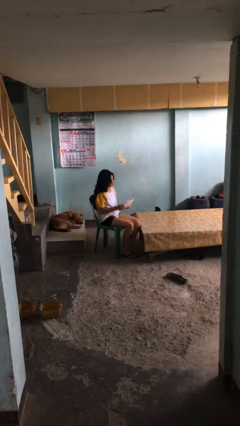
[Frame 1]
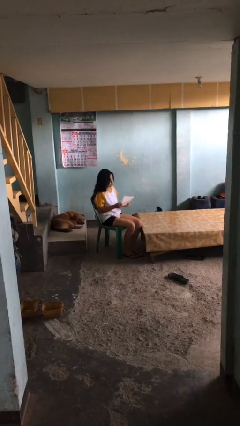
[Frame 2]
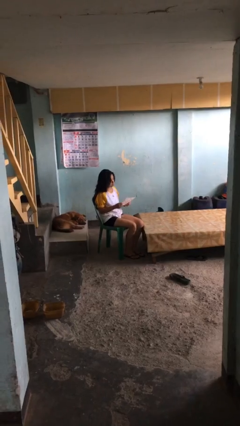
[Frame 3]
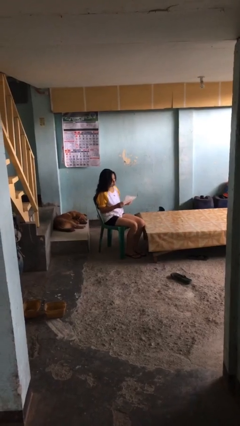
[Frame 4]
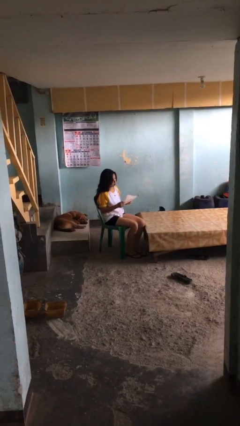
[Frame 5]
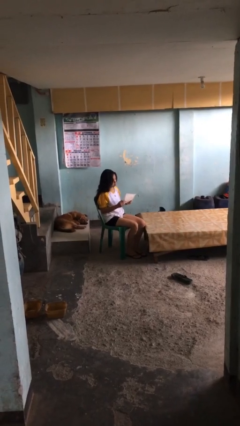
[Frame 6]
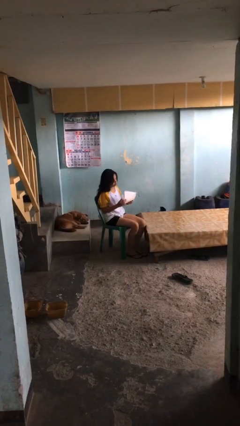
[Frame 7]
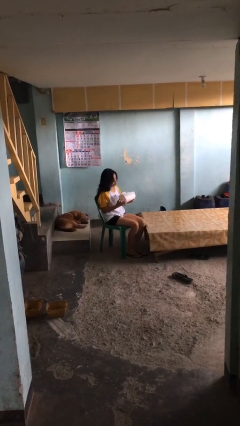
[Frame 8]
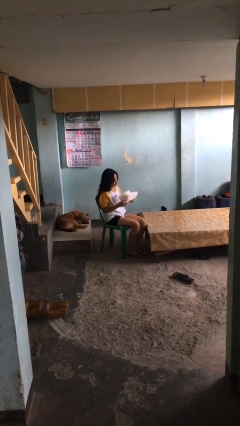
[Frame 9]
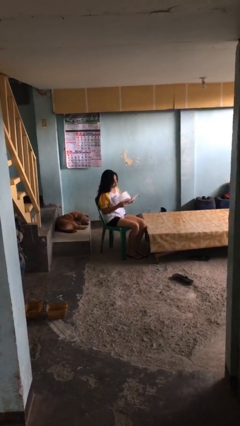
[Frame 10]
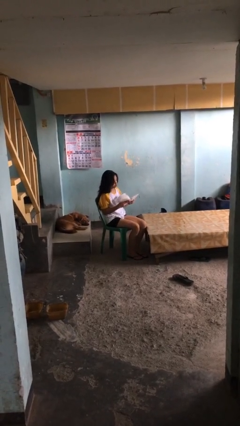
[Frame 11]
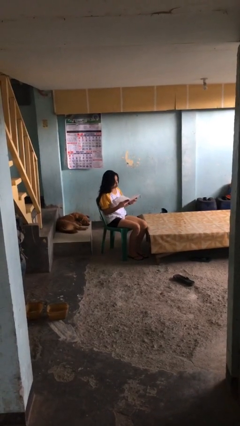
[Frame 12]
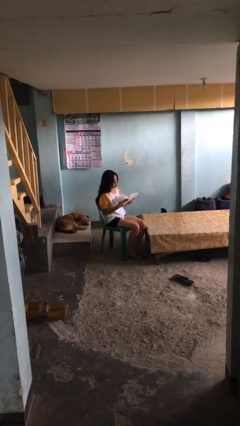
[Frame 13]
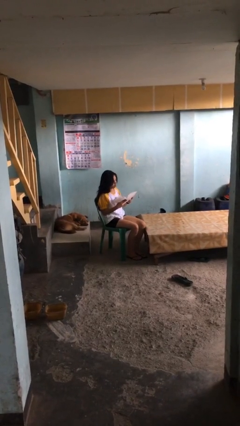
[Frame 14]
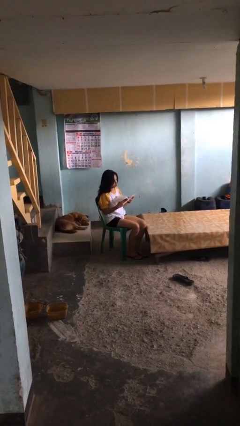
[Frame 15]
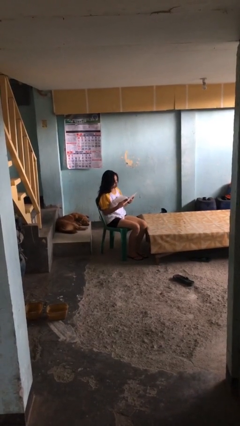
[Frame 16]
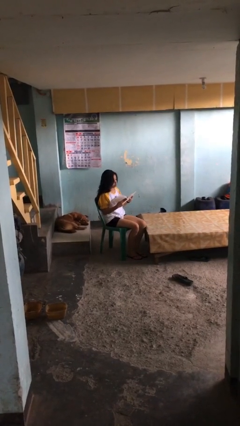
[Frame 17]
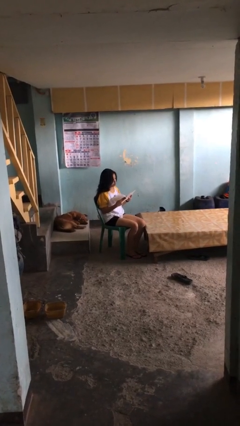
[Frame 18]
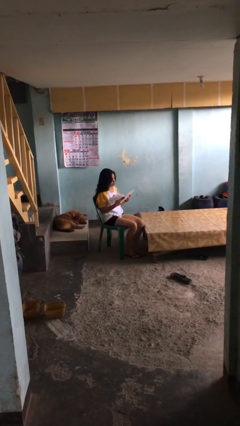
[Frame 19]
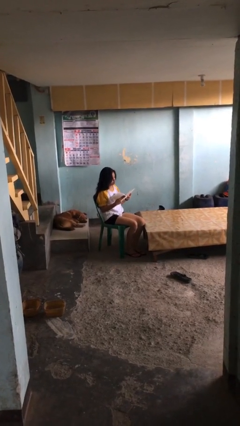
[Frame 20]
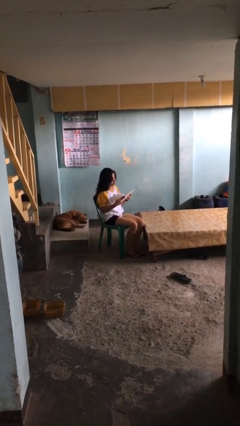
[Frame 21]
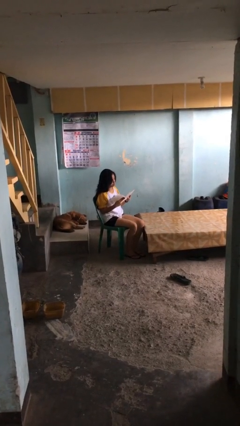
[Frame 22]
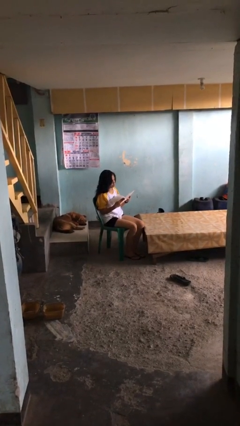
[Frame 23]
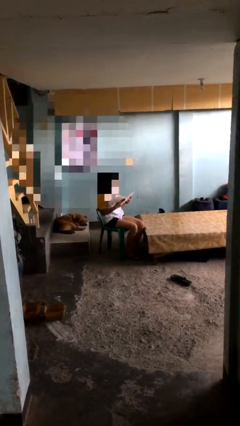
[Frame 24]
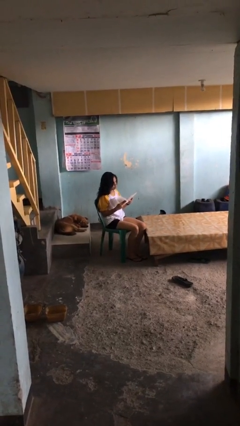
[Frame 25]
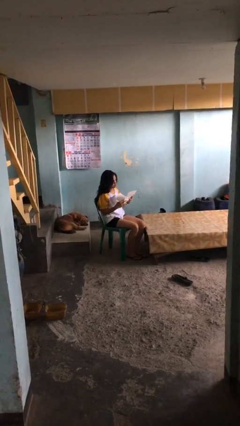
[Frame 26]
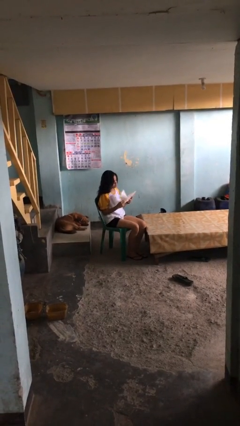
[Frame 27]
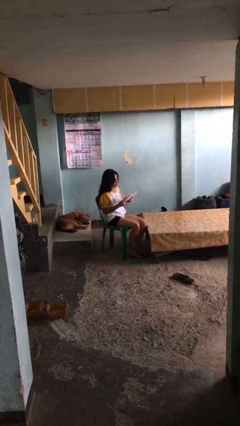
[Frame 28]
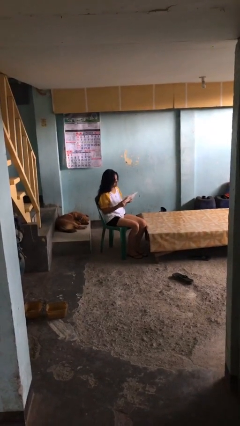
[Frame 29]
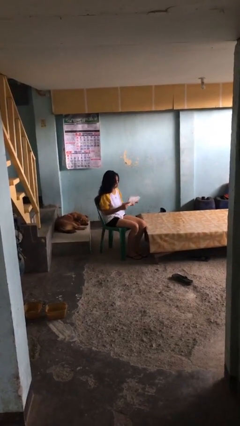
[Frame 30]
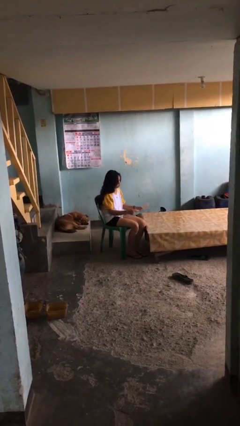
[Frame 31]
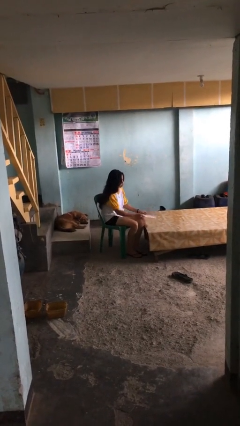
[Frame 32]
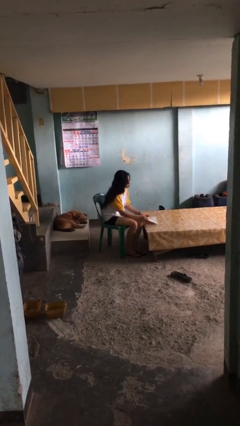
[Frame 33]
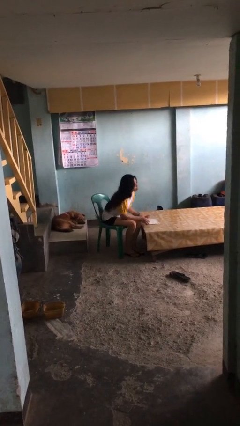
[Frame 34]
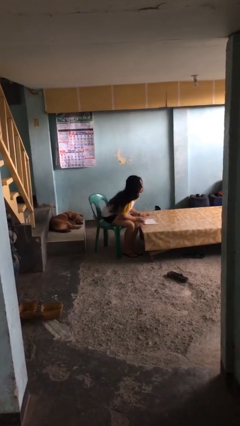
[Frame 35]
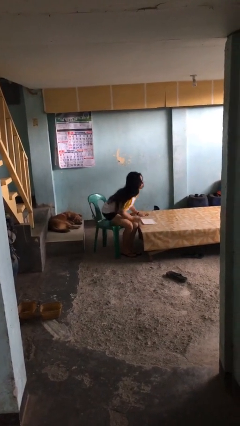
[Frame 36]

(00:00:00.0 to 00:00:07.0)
person reads document

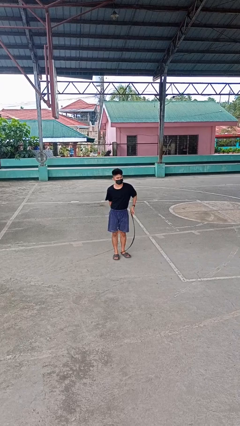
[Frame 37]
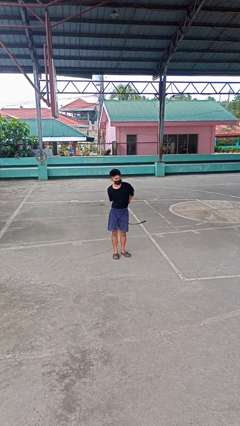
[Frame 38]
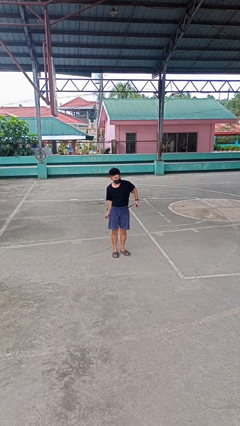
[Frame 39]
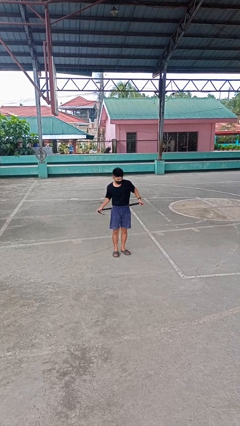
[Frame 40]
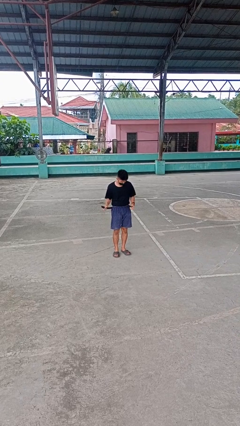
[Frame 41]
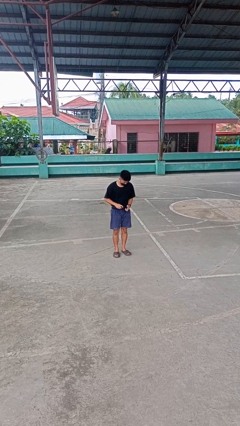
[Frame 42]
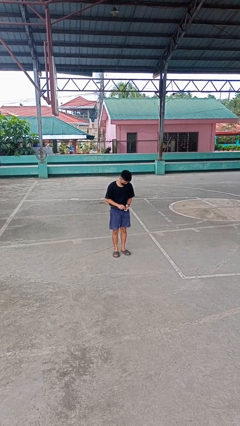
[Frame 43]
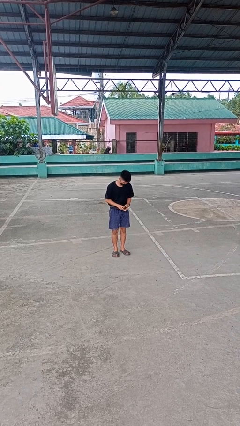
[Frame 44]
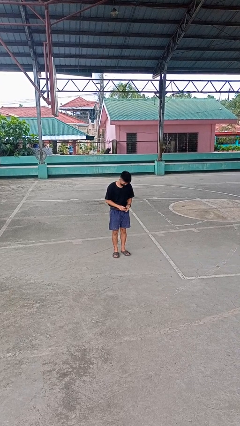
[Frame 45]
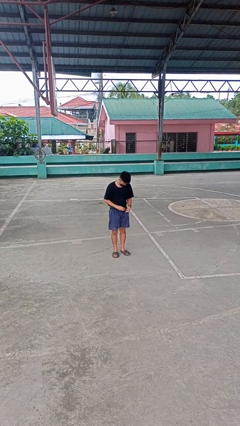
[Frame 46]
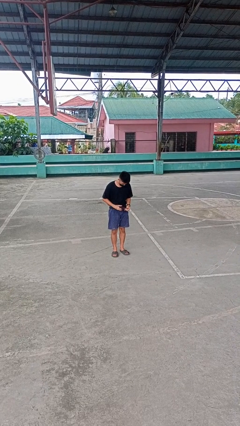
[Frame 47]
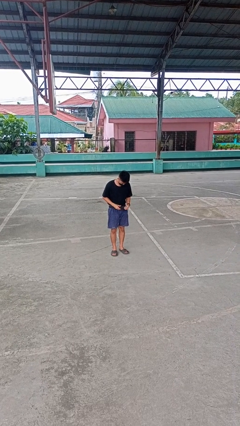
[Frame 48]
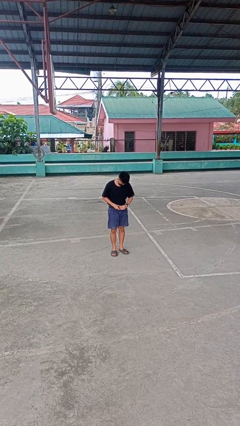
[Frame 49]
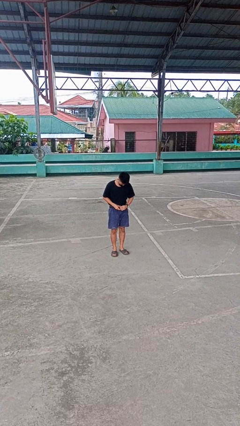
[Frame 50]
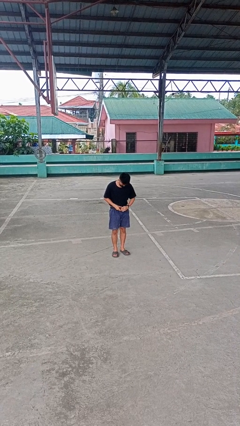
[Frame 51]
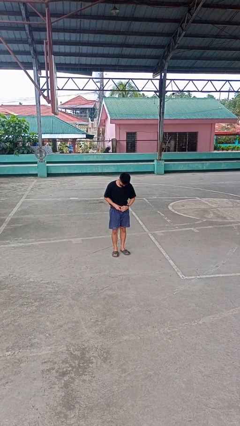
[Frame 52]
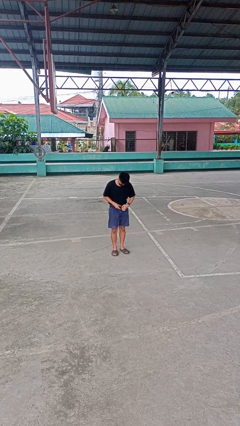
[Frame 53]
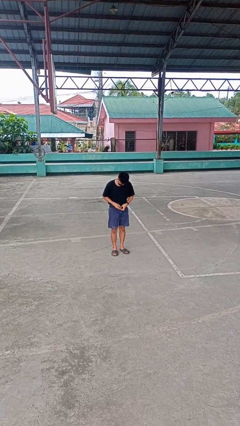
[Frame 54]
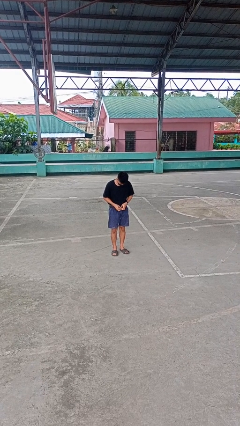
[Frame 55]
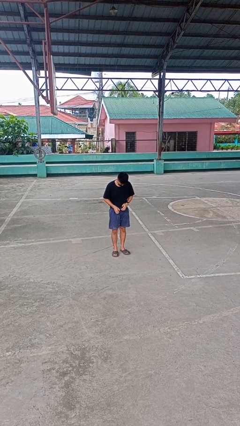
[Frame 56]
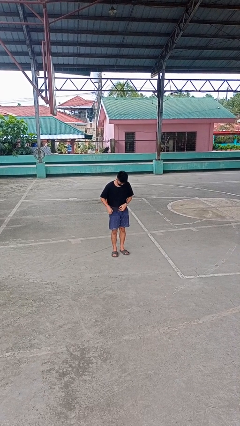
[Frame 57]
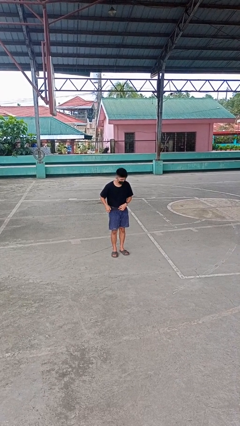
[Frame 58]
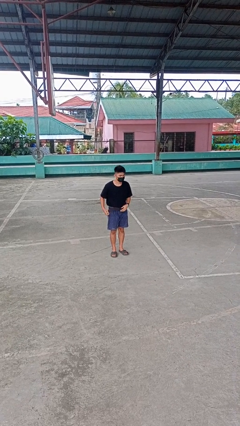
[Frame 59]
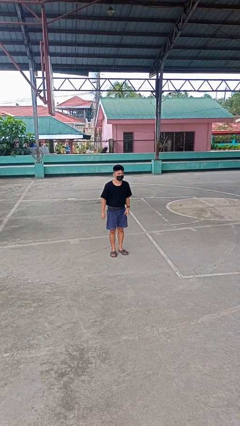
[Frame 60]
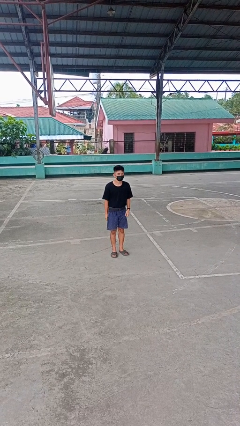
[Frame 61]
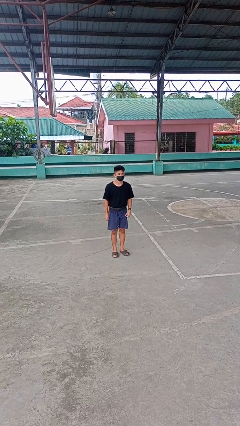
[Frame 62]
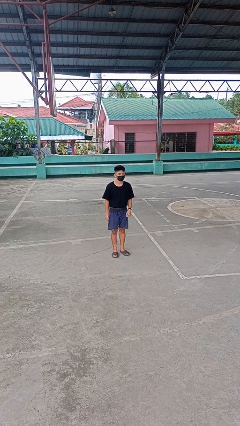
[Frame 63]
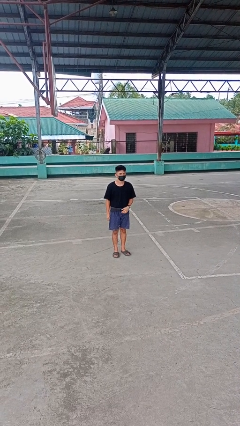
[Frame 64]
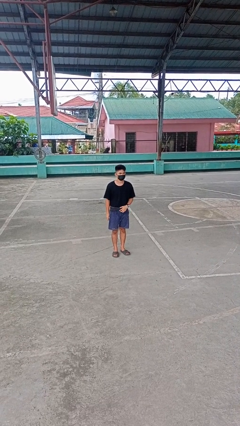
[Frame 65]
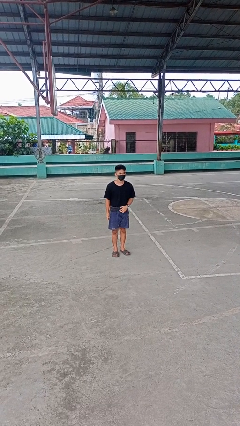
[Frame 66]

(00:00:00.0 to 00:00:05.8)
person puts on belt

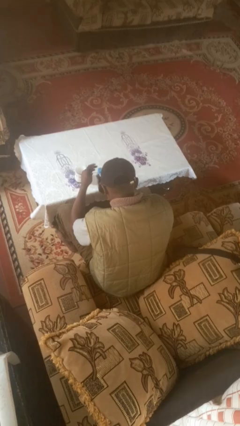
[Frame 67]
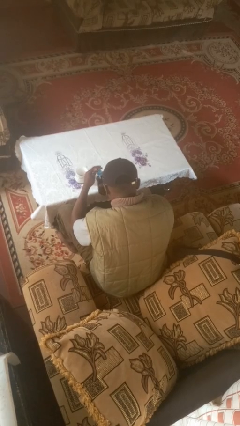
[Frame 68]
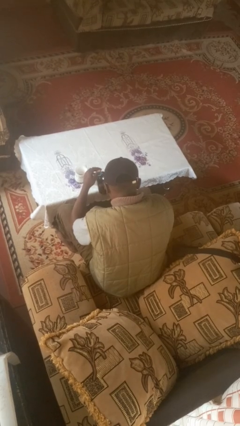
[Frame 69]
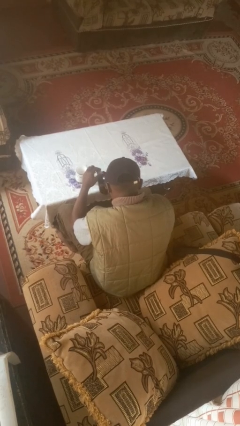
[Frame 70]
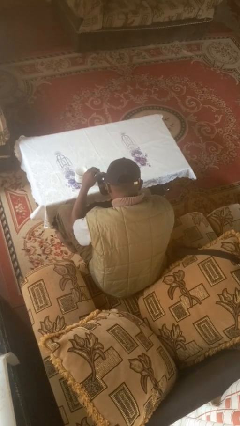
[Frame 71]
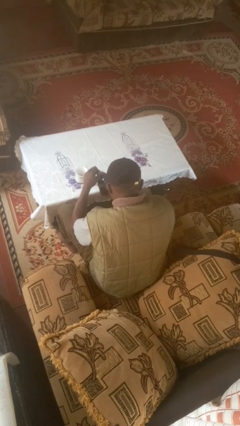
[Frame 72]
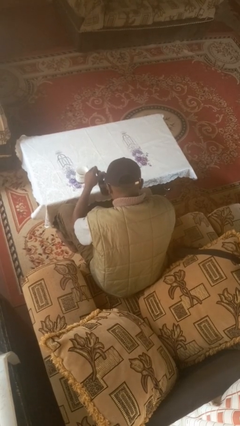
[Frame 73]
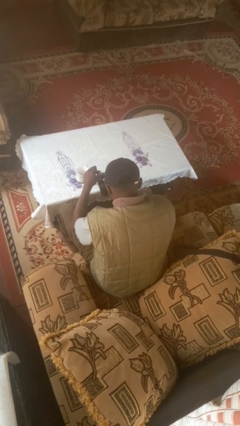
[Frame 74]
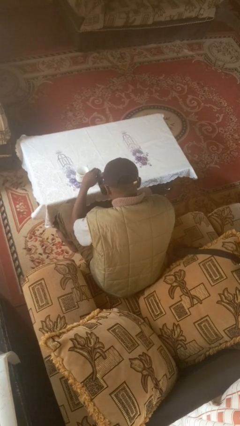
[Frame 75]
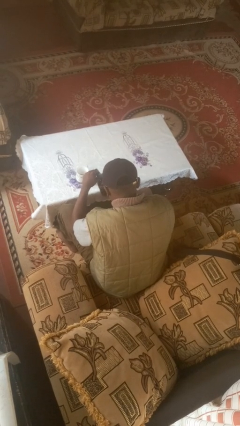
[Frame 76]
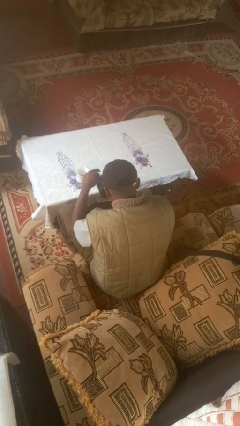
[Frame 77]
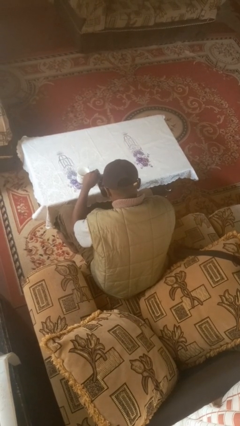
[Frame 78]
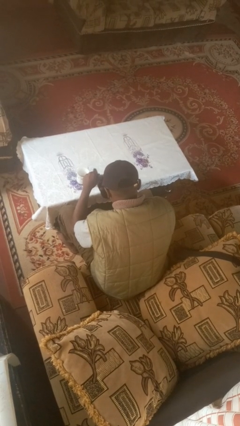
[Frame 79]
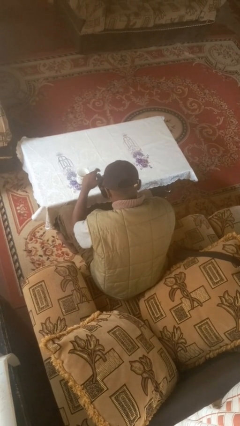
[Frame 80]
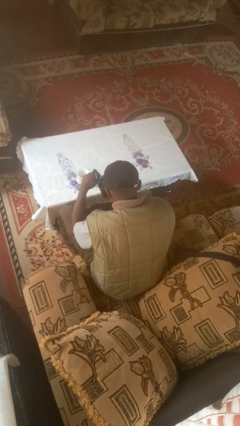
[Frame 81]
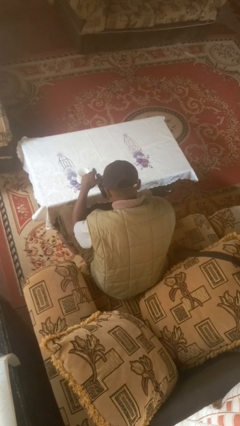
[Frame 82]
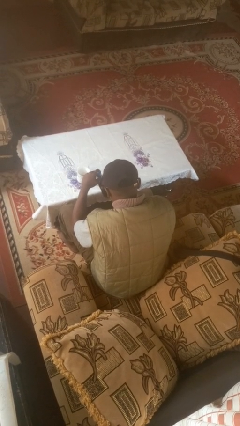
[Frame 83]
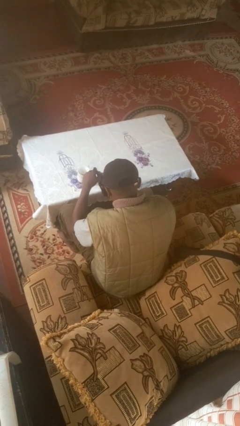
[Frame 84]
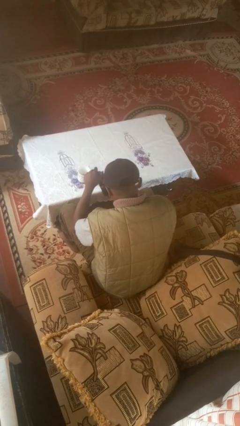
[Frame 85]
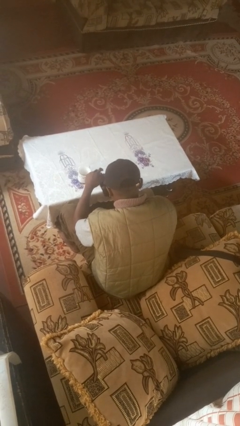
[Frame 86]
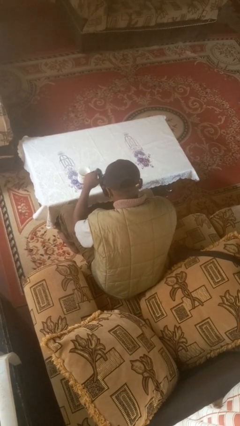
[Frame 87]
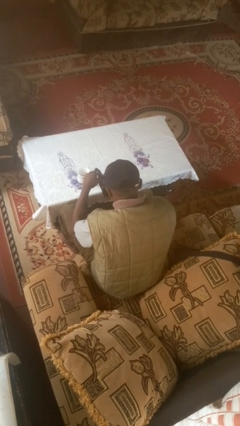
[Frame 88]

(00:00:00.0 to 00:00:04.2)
person unscrews lid from bottle

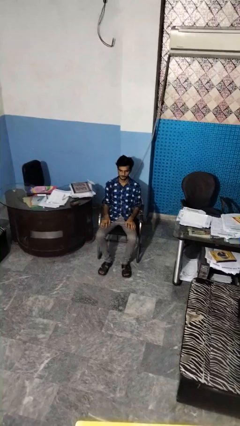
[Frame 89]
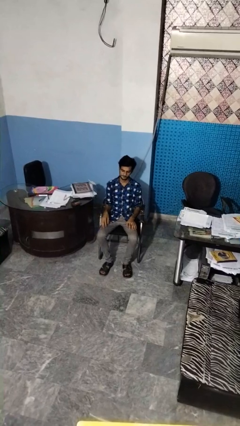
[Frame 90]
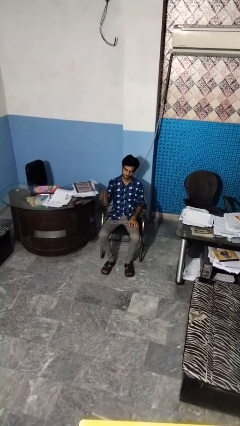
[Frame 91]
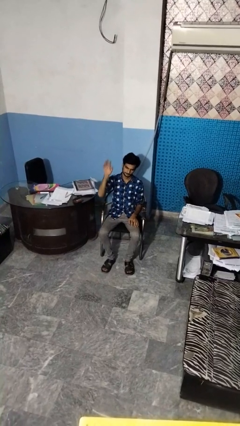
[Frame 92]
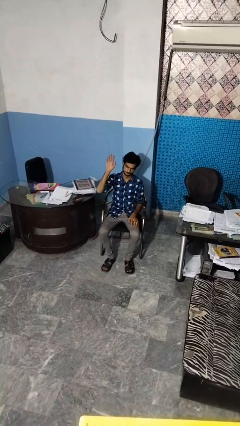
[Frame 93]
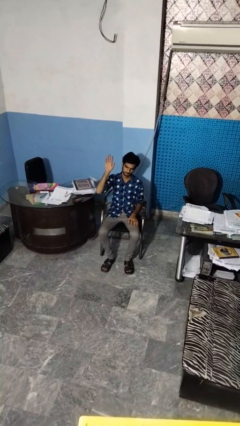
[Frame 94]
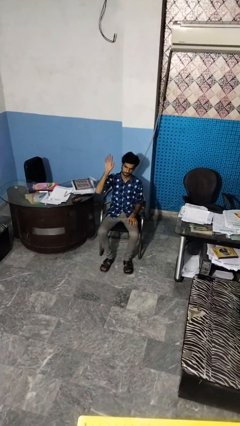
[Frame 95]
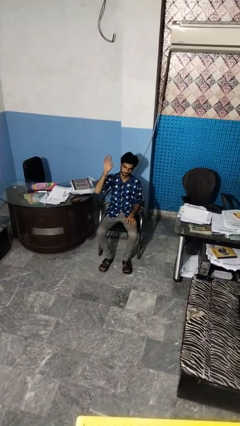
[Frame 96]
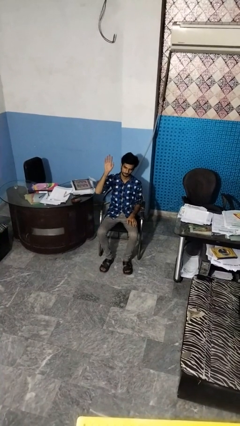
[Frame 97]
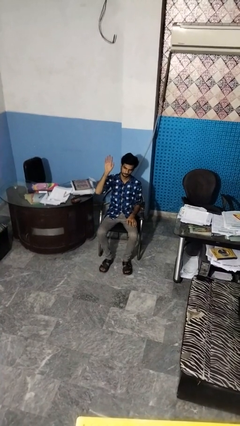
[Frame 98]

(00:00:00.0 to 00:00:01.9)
person gestures raise hand
